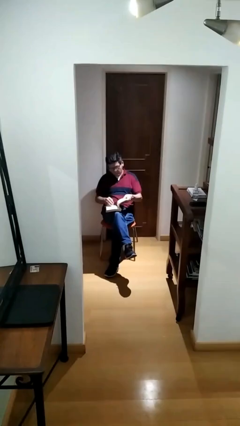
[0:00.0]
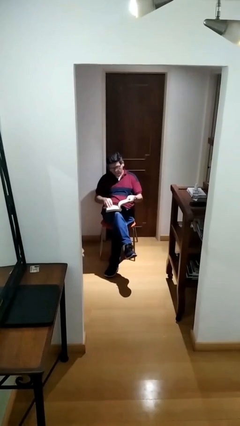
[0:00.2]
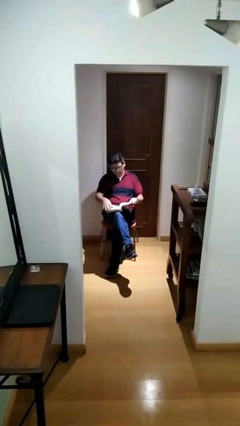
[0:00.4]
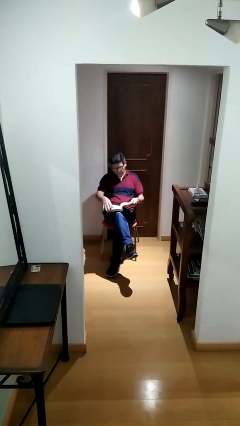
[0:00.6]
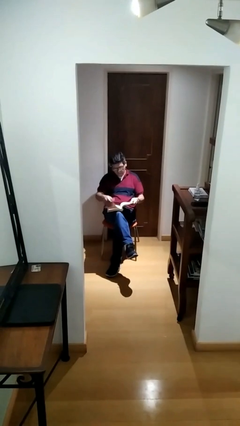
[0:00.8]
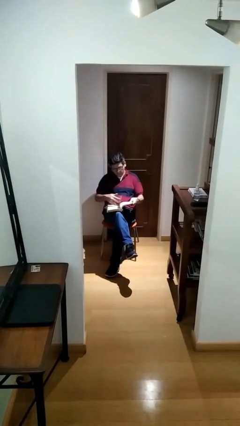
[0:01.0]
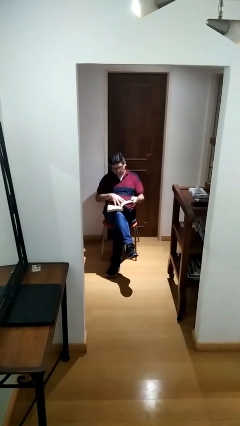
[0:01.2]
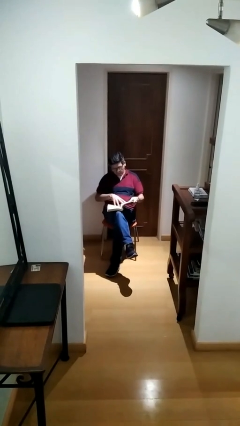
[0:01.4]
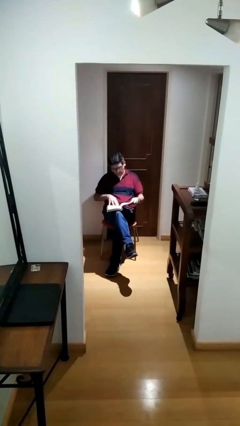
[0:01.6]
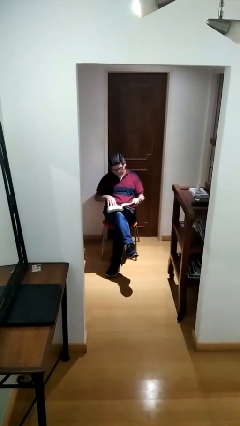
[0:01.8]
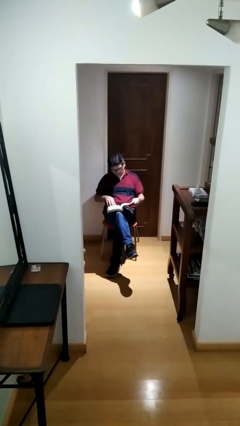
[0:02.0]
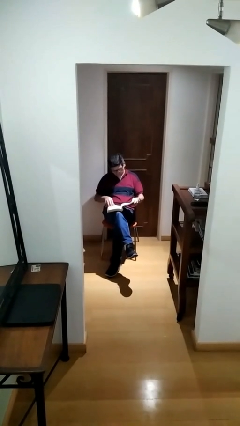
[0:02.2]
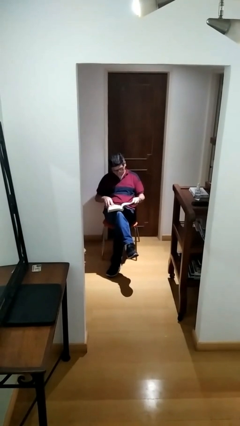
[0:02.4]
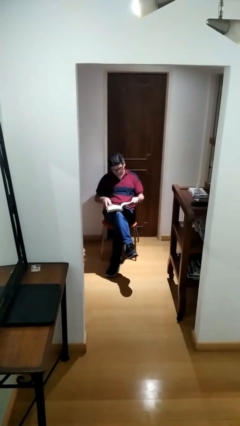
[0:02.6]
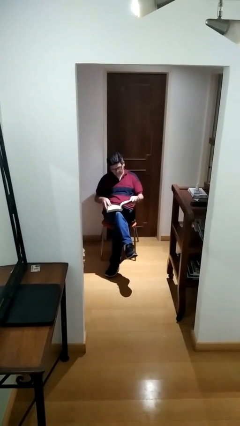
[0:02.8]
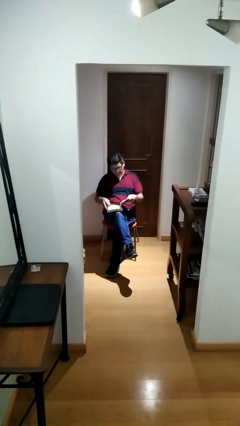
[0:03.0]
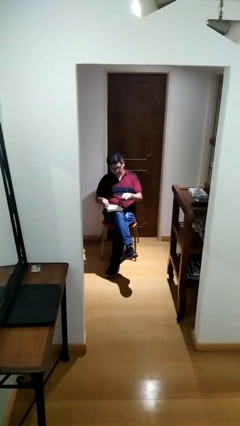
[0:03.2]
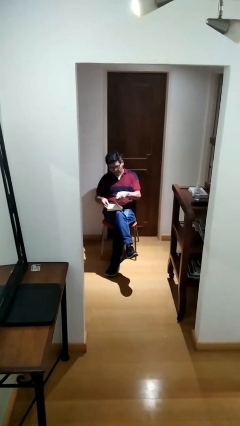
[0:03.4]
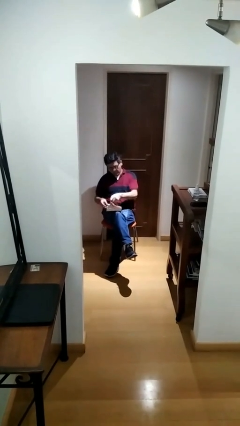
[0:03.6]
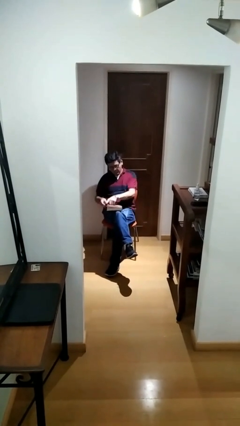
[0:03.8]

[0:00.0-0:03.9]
person reads document

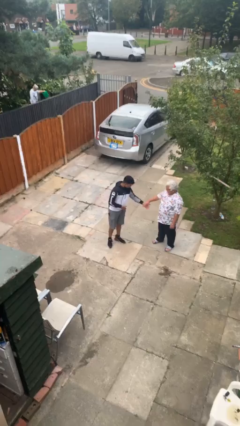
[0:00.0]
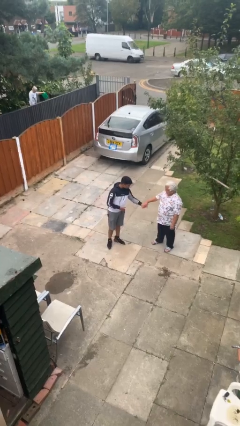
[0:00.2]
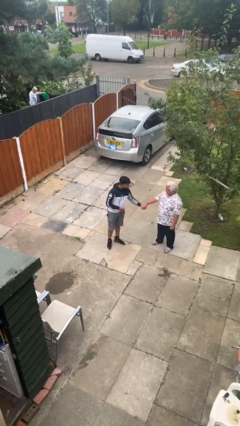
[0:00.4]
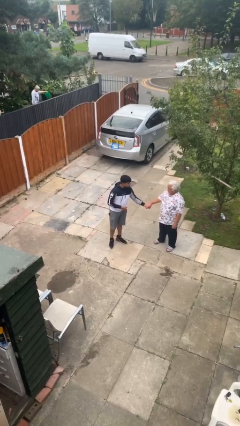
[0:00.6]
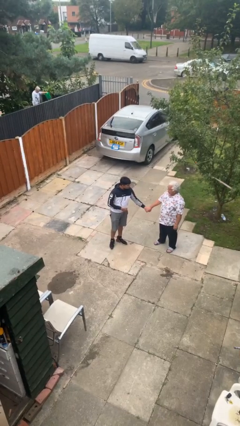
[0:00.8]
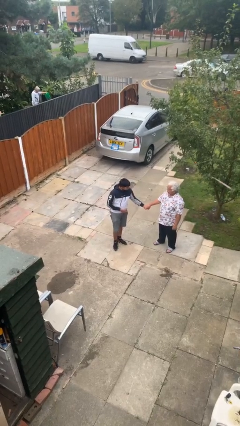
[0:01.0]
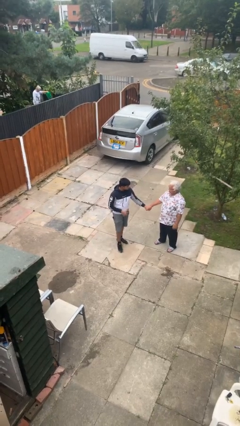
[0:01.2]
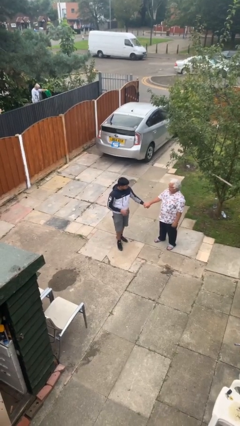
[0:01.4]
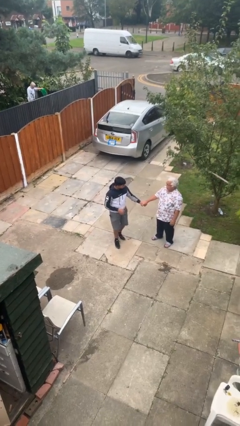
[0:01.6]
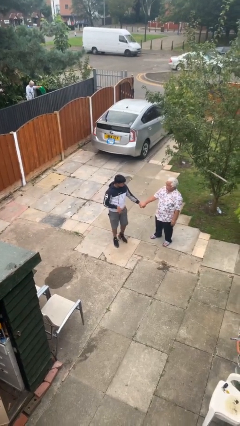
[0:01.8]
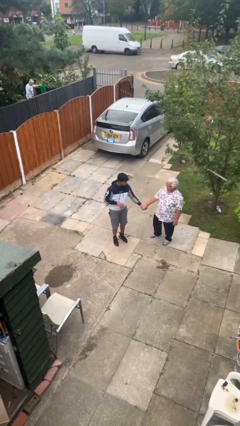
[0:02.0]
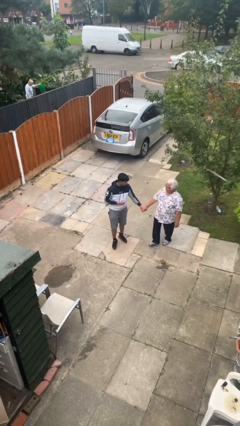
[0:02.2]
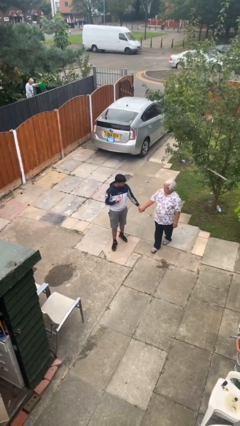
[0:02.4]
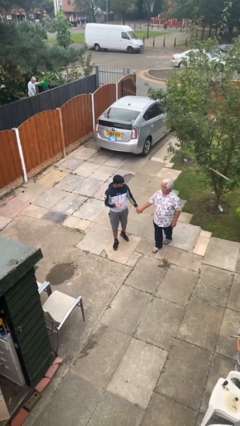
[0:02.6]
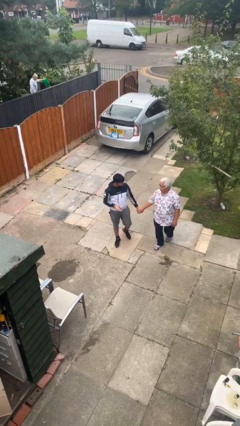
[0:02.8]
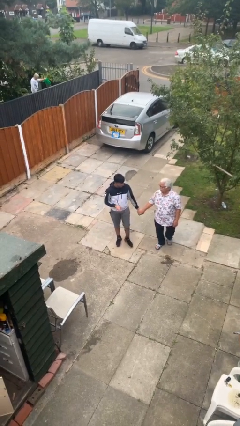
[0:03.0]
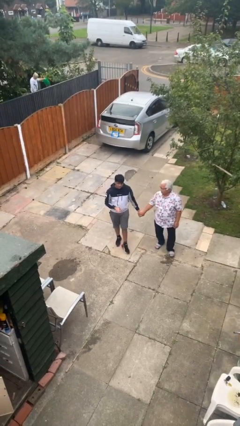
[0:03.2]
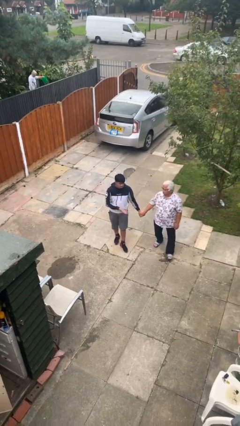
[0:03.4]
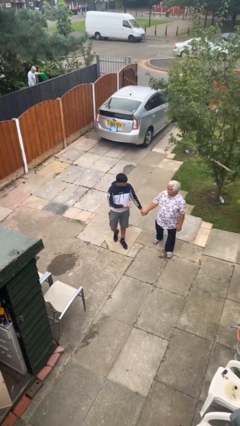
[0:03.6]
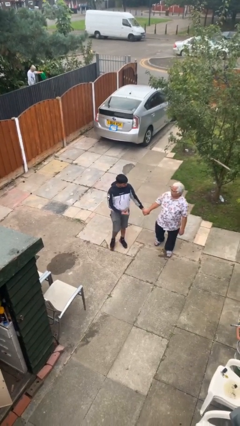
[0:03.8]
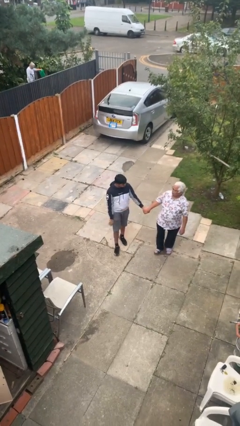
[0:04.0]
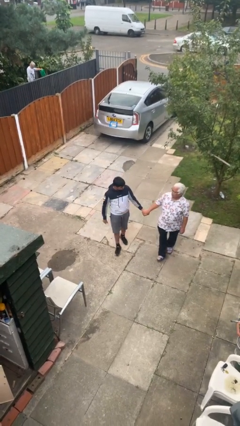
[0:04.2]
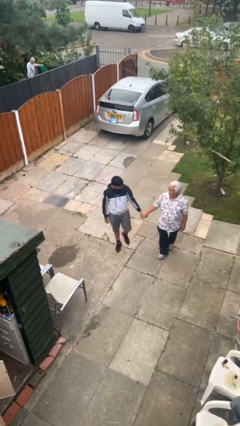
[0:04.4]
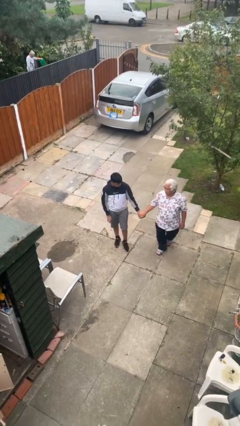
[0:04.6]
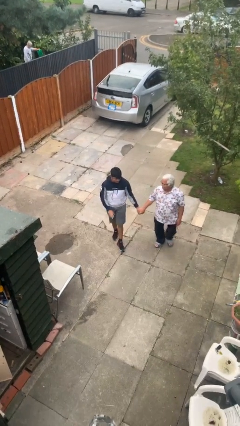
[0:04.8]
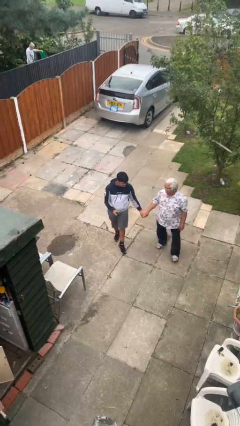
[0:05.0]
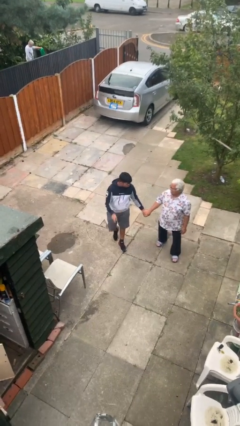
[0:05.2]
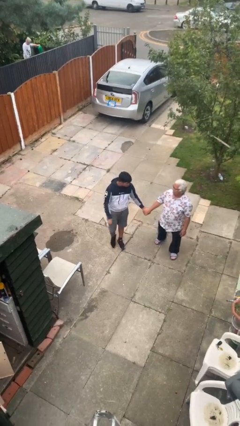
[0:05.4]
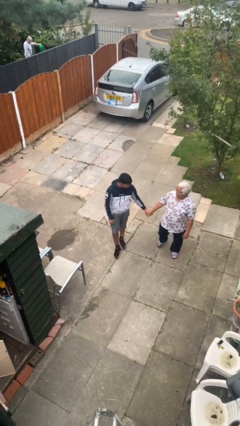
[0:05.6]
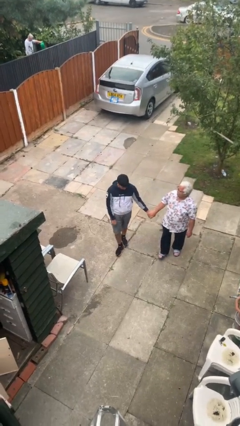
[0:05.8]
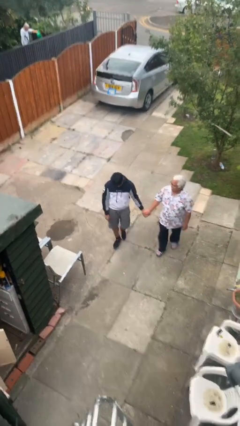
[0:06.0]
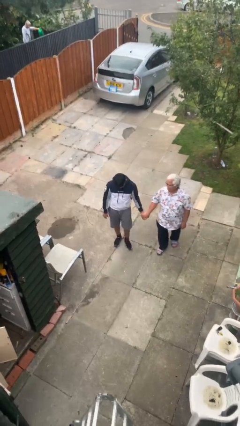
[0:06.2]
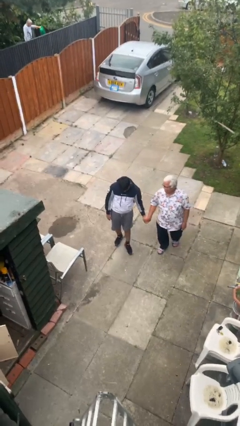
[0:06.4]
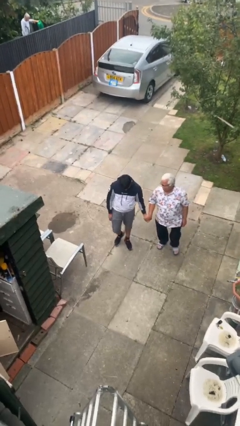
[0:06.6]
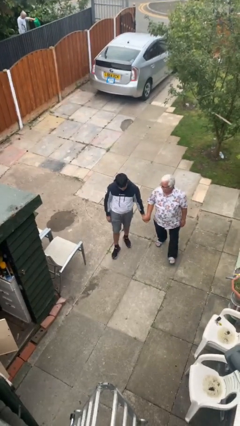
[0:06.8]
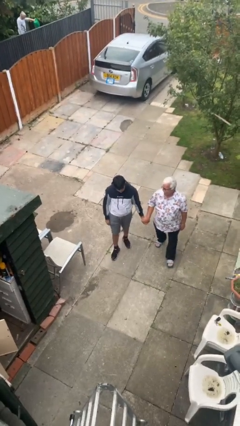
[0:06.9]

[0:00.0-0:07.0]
person holds hand

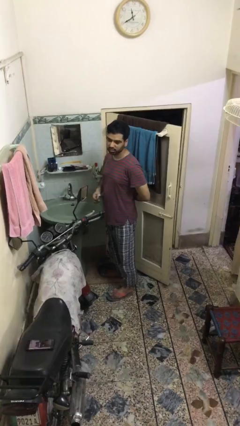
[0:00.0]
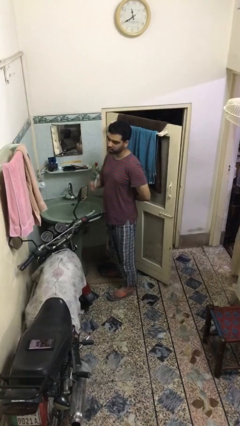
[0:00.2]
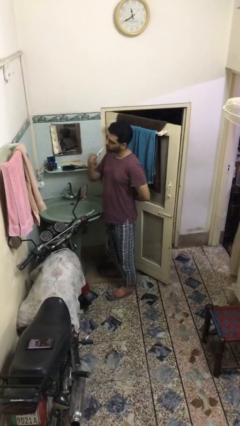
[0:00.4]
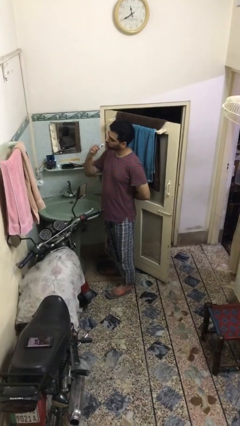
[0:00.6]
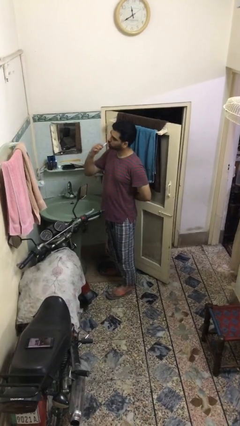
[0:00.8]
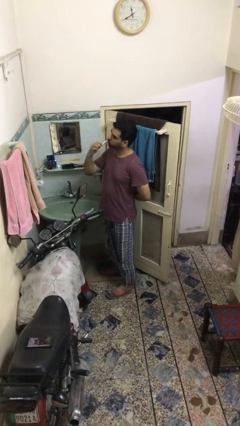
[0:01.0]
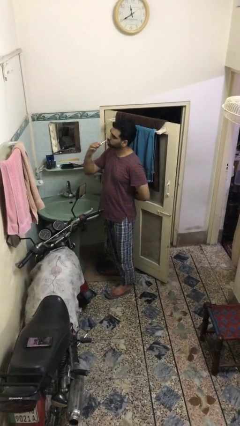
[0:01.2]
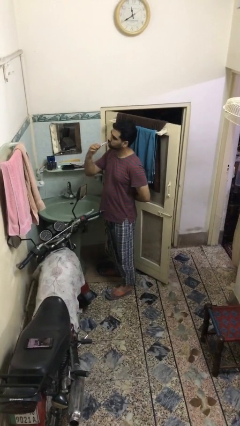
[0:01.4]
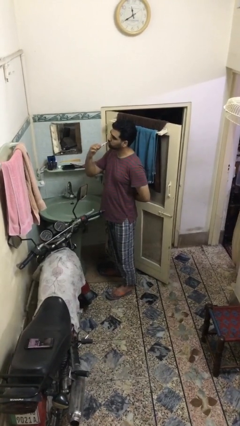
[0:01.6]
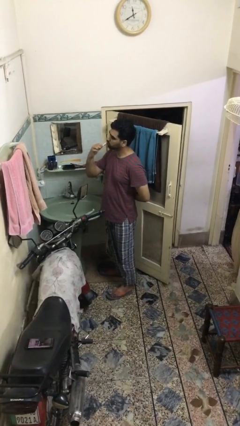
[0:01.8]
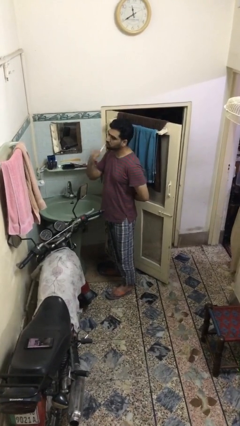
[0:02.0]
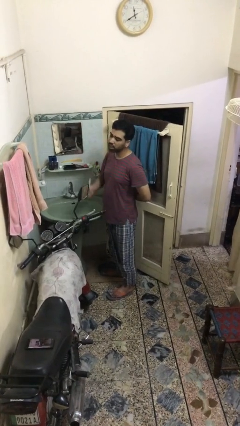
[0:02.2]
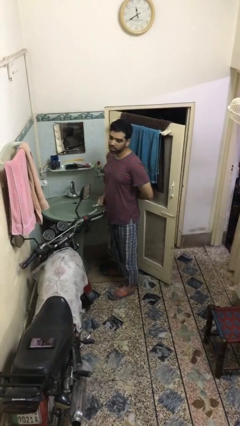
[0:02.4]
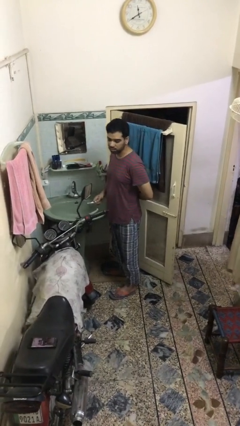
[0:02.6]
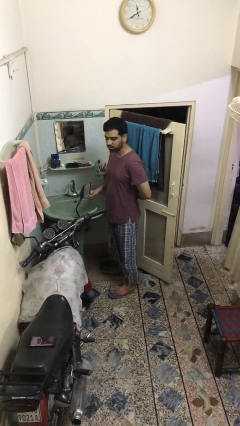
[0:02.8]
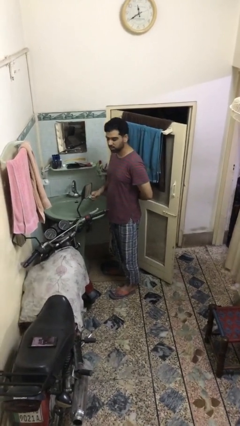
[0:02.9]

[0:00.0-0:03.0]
person brushes teeth

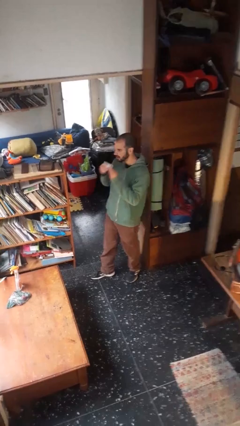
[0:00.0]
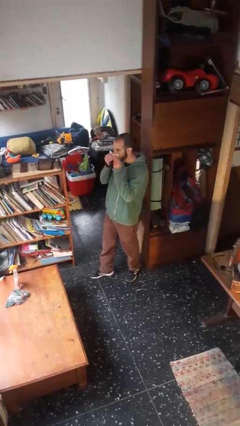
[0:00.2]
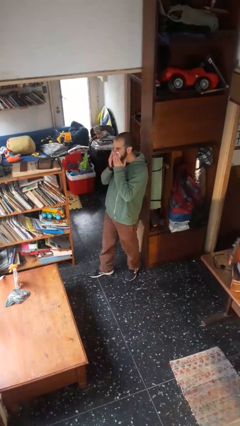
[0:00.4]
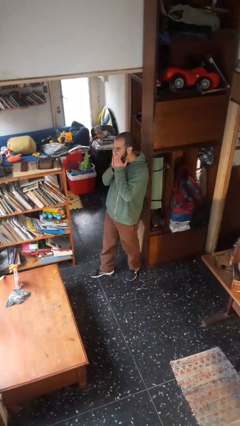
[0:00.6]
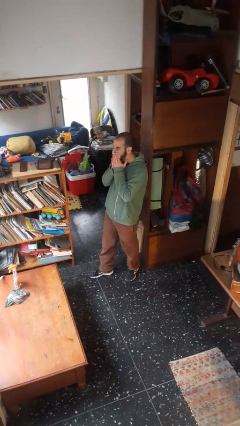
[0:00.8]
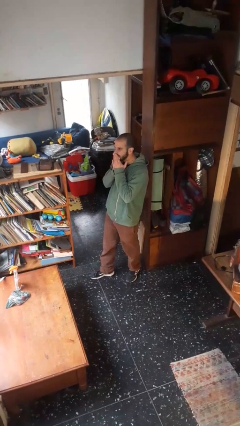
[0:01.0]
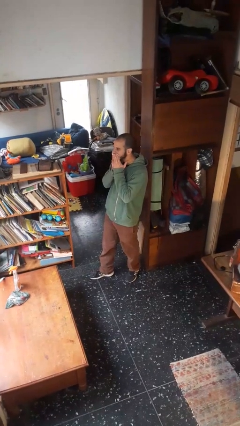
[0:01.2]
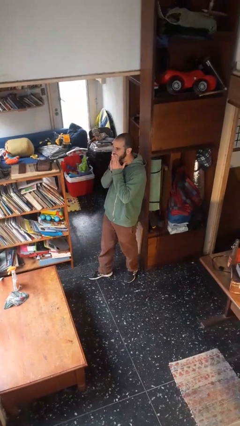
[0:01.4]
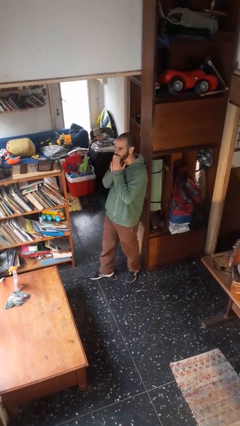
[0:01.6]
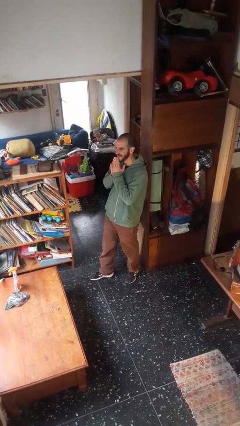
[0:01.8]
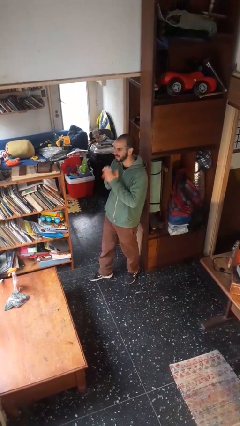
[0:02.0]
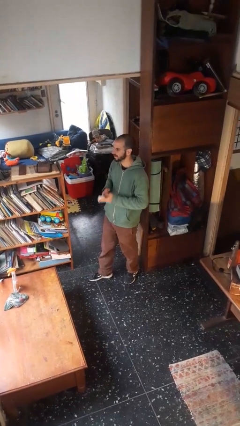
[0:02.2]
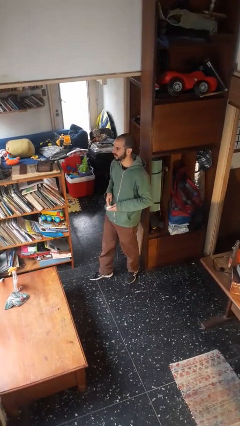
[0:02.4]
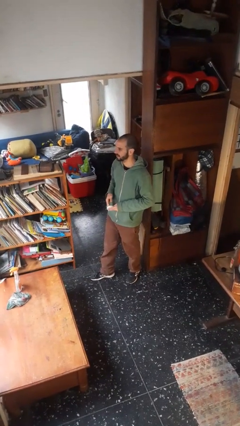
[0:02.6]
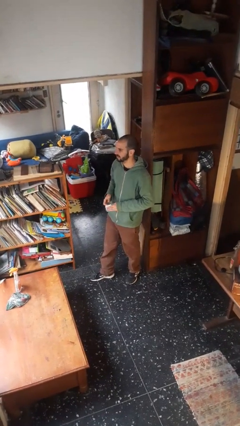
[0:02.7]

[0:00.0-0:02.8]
person wipes mouth with napkin

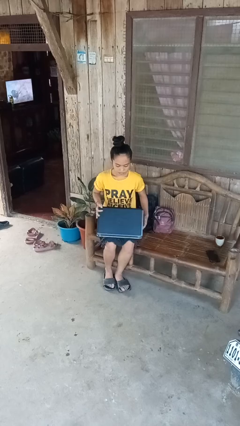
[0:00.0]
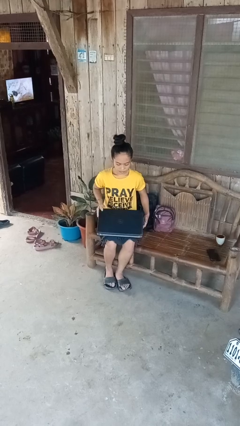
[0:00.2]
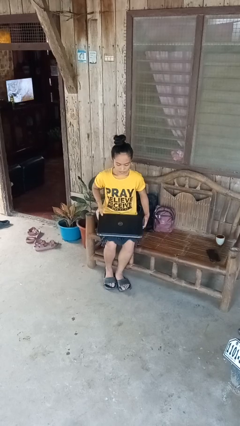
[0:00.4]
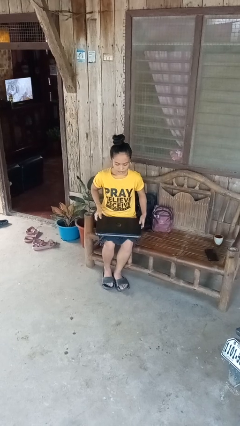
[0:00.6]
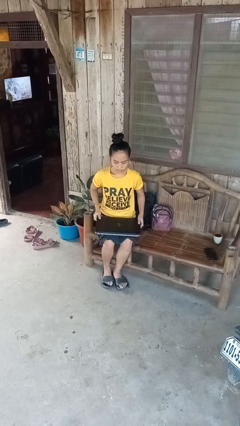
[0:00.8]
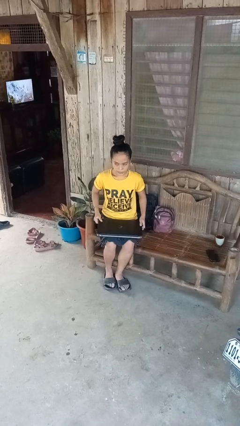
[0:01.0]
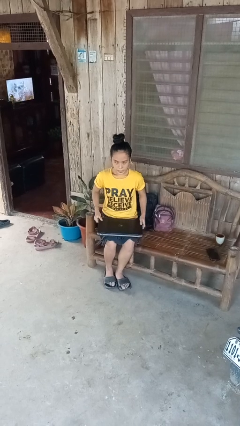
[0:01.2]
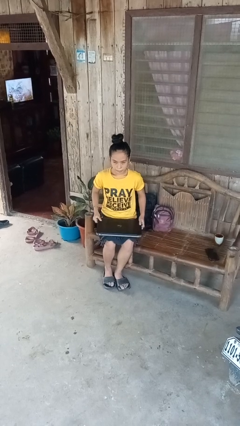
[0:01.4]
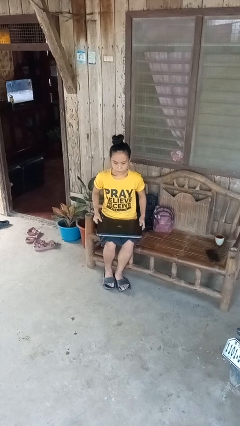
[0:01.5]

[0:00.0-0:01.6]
person closes laptop
